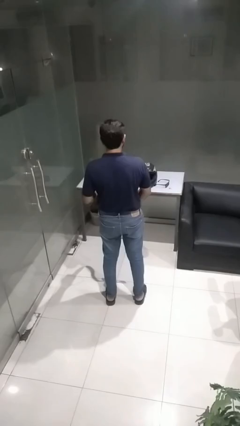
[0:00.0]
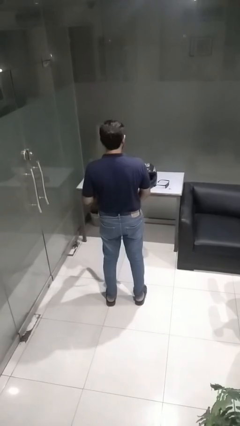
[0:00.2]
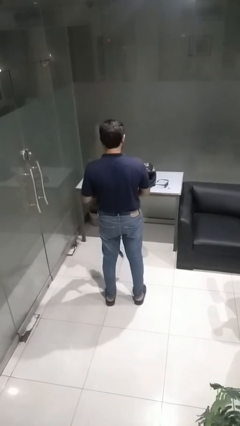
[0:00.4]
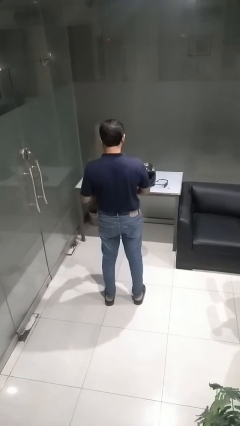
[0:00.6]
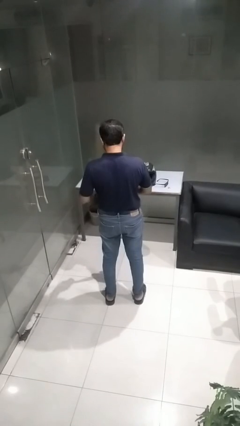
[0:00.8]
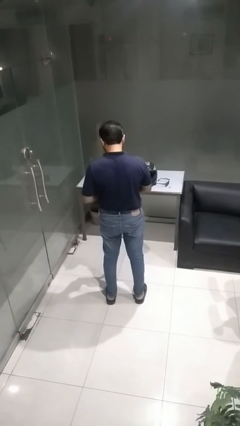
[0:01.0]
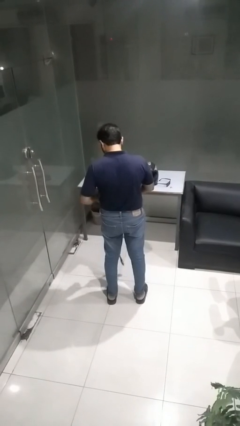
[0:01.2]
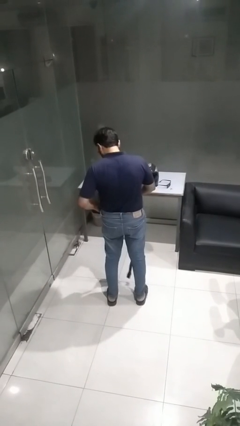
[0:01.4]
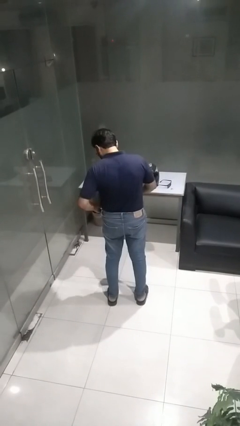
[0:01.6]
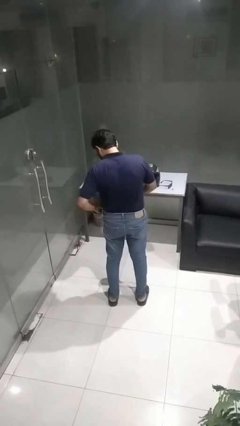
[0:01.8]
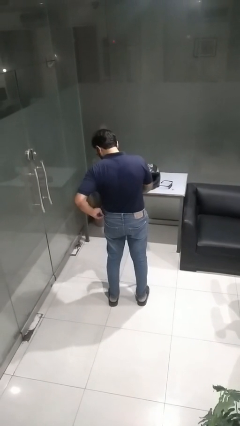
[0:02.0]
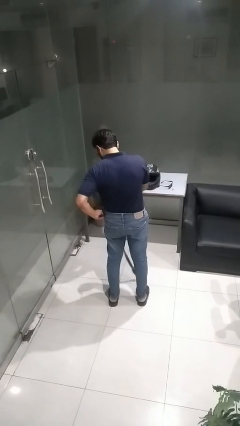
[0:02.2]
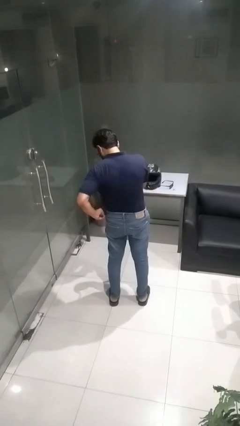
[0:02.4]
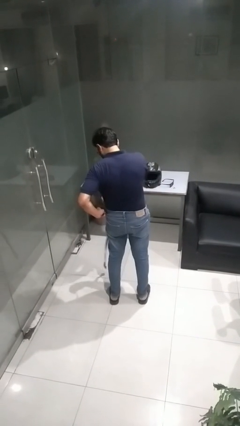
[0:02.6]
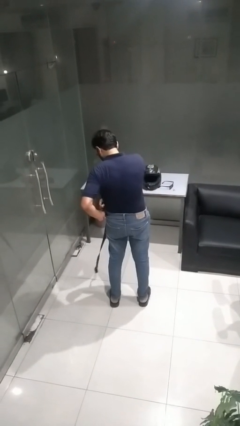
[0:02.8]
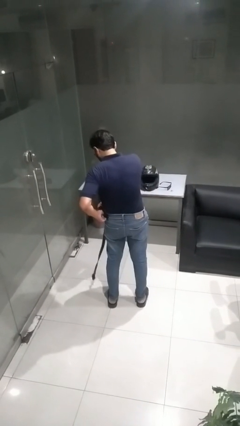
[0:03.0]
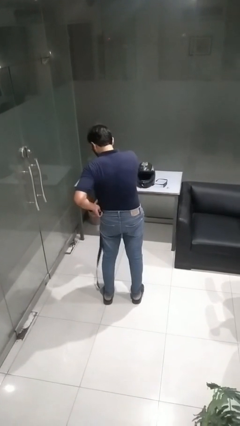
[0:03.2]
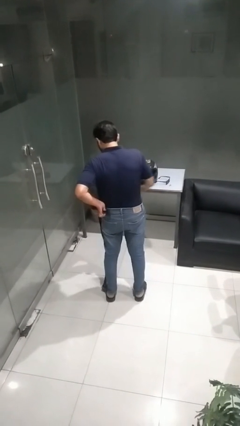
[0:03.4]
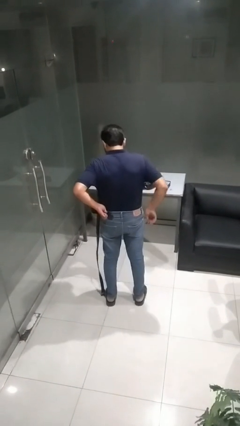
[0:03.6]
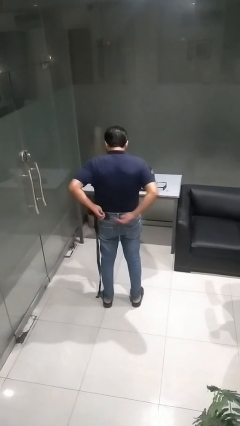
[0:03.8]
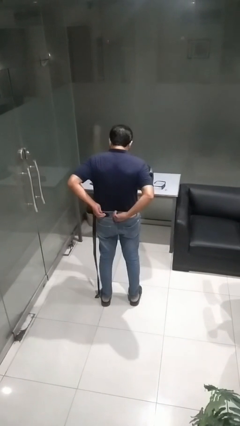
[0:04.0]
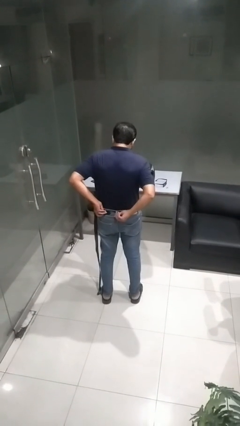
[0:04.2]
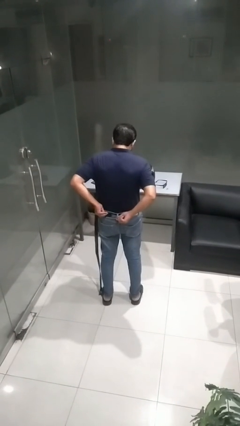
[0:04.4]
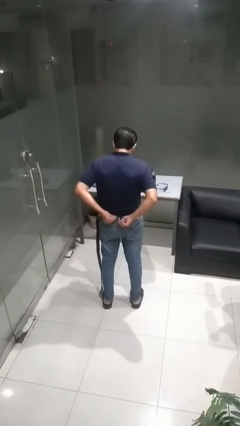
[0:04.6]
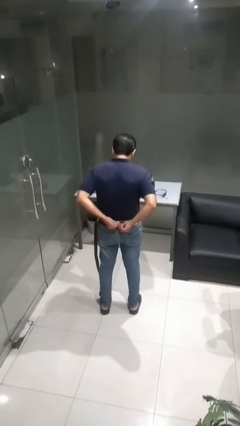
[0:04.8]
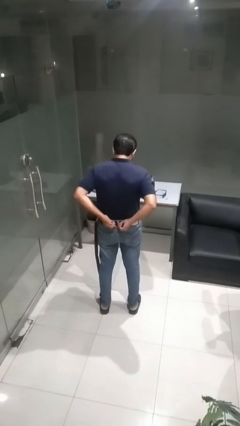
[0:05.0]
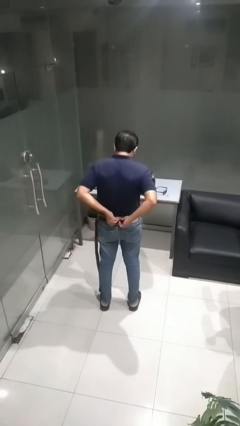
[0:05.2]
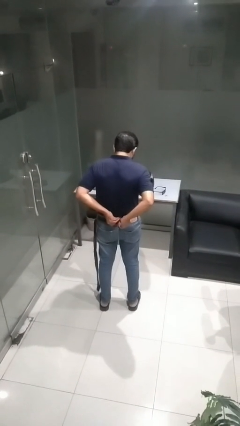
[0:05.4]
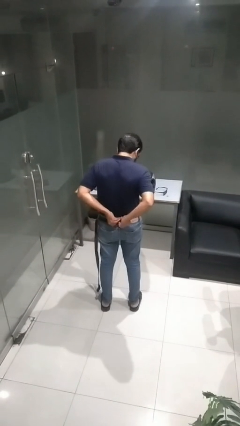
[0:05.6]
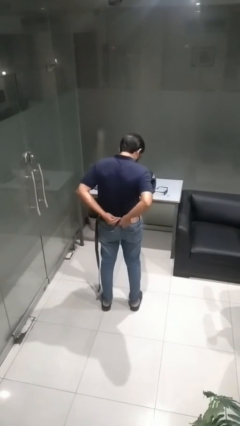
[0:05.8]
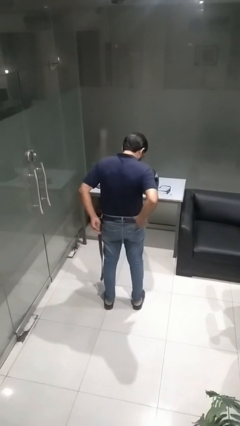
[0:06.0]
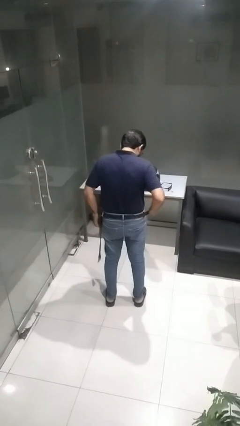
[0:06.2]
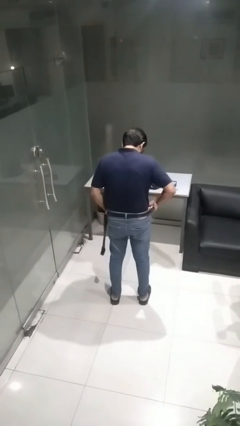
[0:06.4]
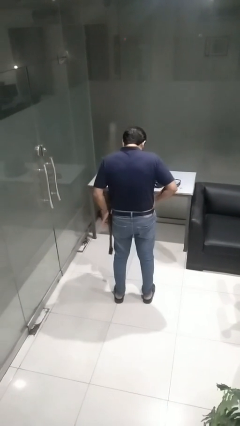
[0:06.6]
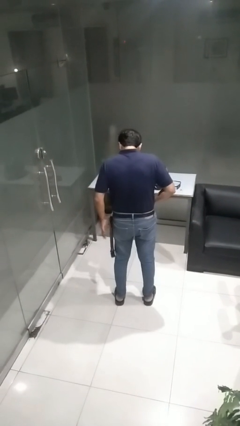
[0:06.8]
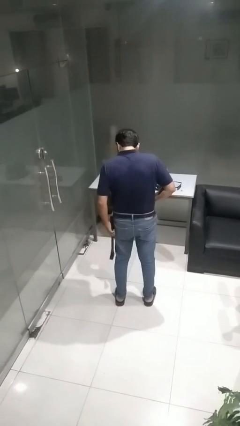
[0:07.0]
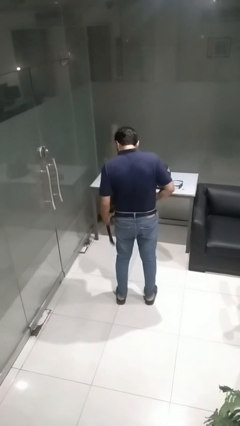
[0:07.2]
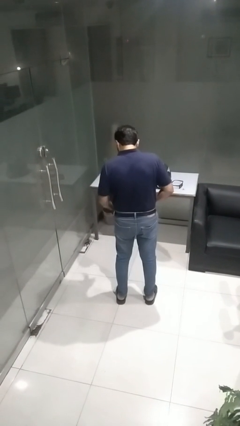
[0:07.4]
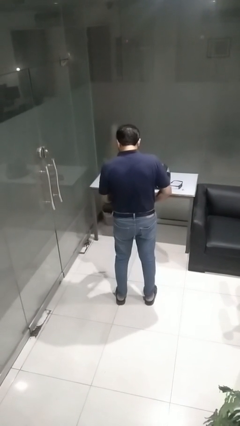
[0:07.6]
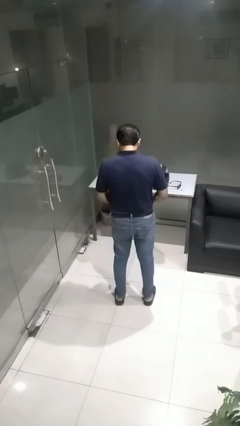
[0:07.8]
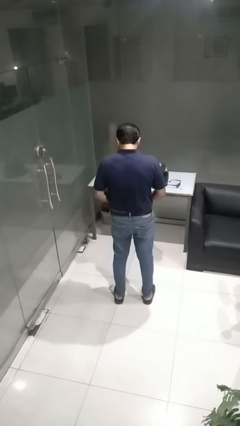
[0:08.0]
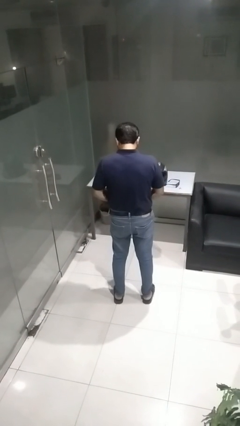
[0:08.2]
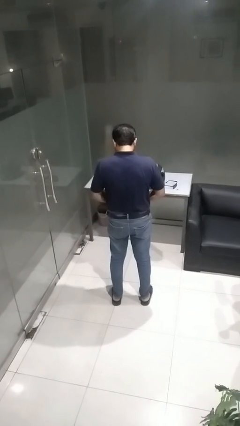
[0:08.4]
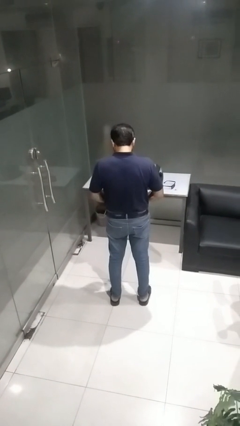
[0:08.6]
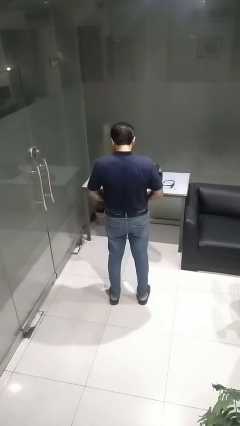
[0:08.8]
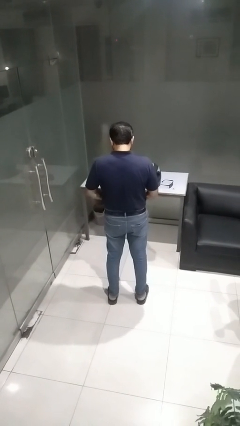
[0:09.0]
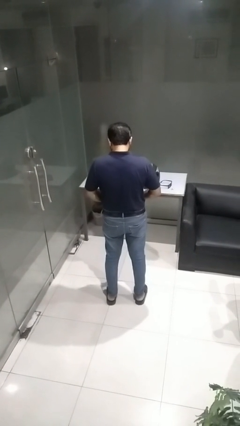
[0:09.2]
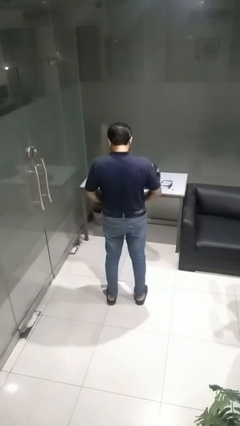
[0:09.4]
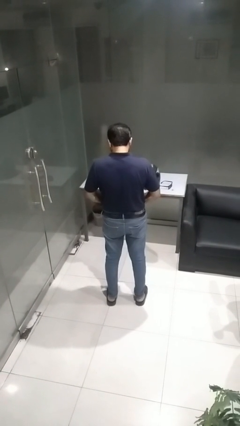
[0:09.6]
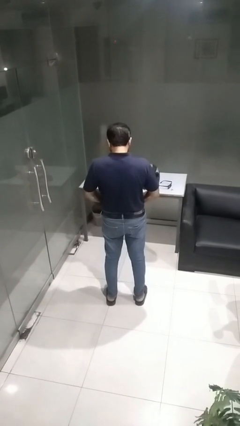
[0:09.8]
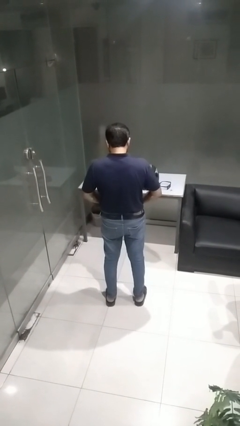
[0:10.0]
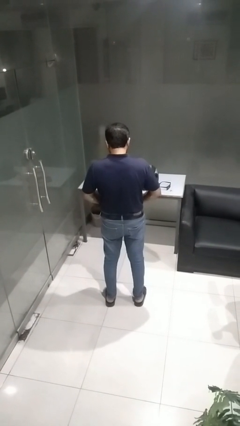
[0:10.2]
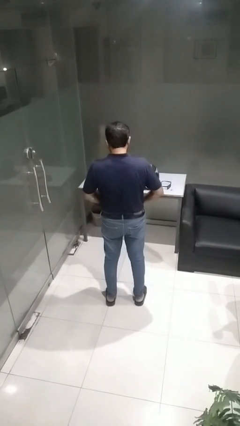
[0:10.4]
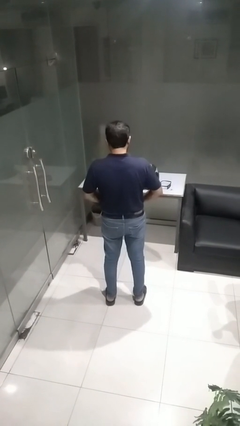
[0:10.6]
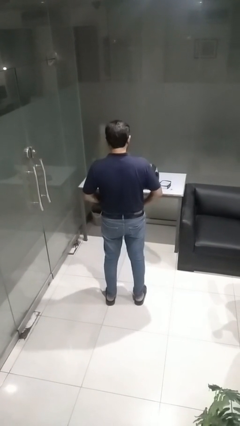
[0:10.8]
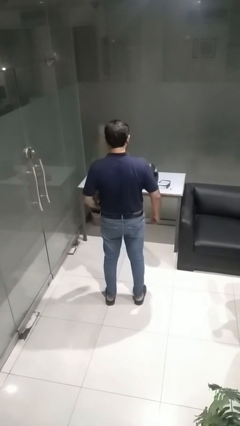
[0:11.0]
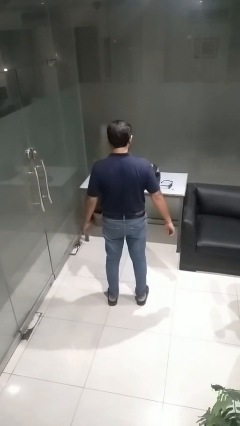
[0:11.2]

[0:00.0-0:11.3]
person puts on belt

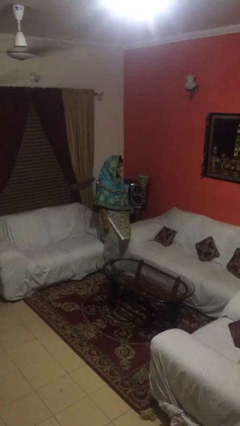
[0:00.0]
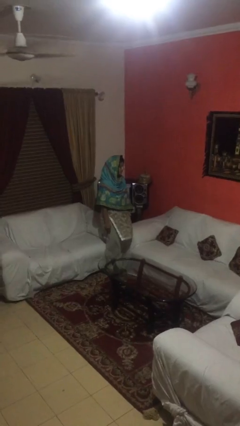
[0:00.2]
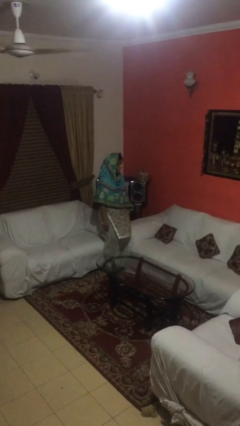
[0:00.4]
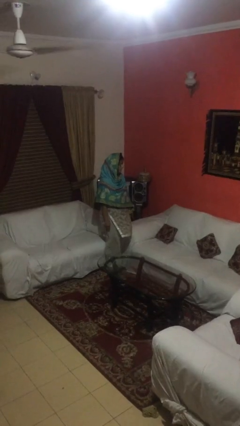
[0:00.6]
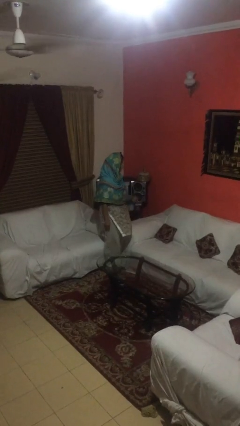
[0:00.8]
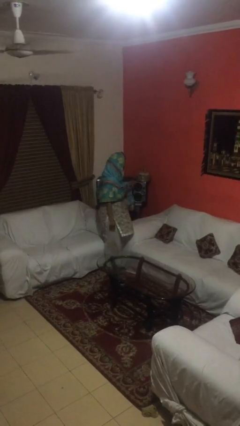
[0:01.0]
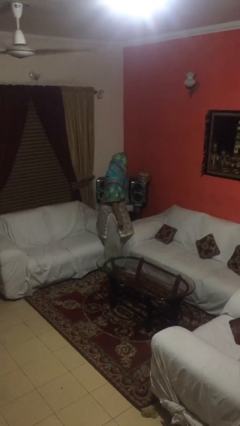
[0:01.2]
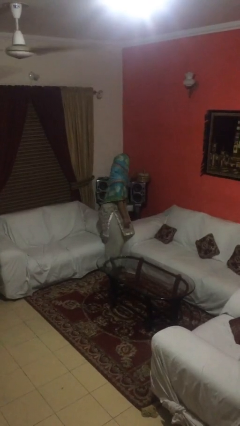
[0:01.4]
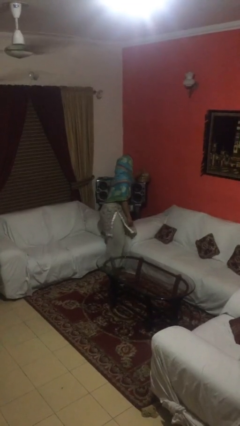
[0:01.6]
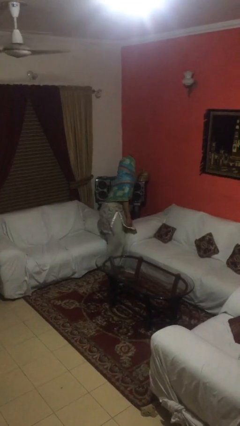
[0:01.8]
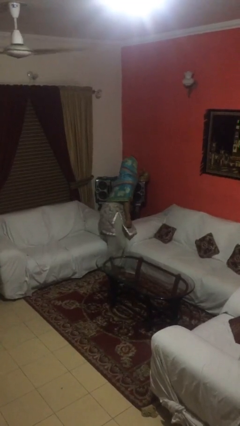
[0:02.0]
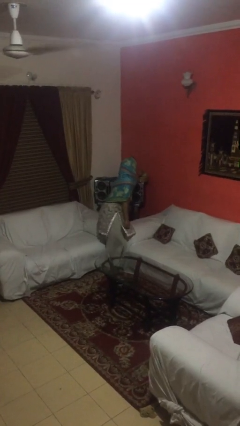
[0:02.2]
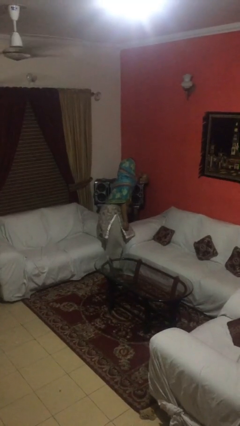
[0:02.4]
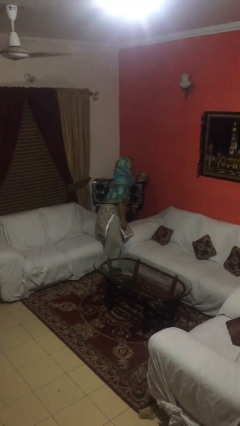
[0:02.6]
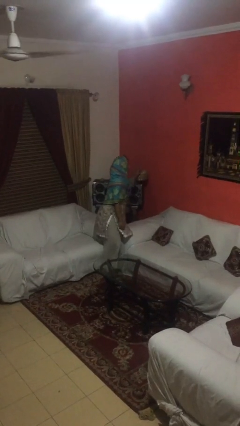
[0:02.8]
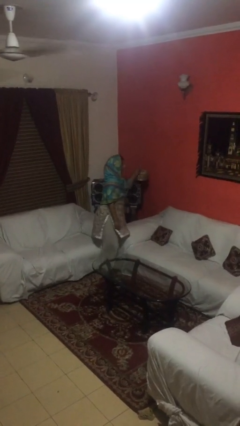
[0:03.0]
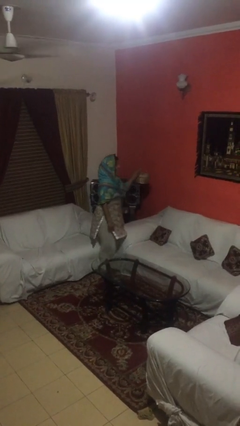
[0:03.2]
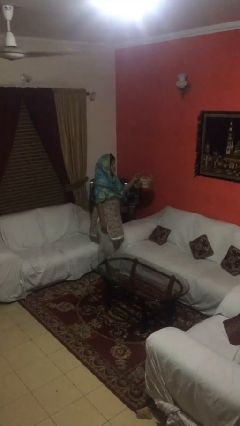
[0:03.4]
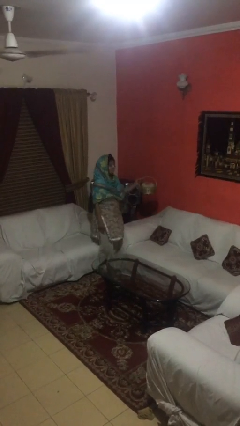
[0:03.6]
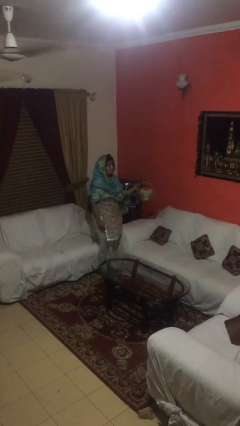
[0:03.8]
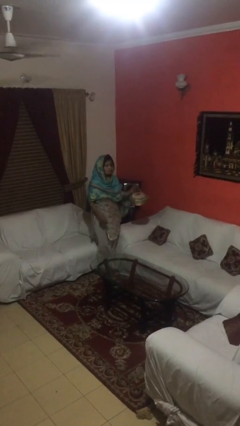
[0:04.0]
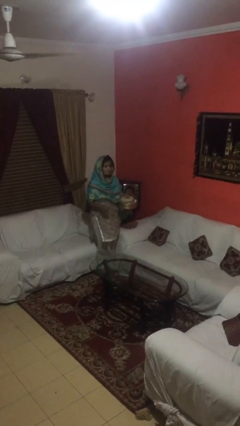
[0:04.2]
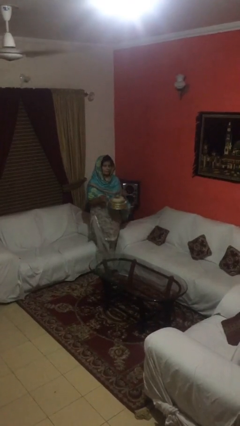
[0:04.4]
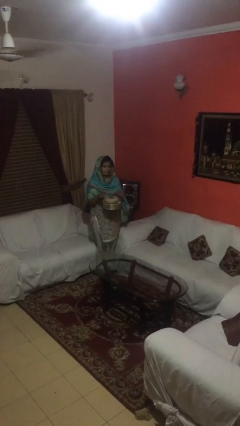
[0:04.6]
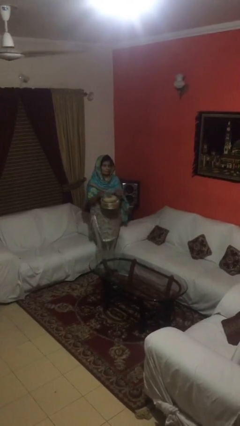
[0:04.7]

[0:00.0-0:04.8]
person picks up object from shelf

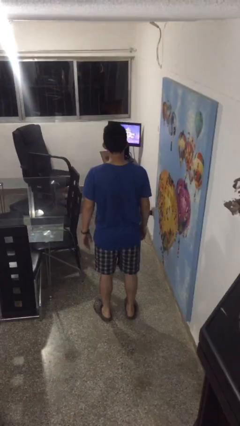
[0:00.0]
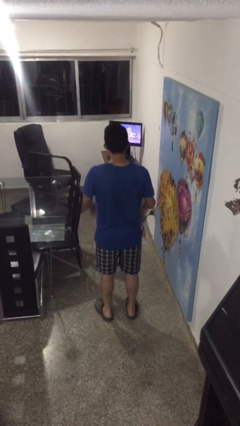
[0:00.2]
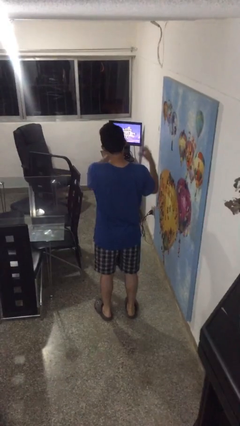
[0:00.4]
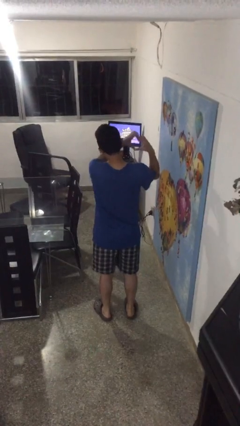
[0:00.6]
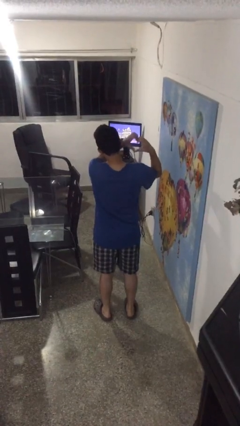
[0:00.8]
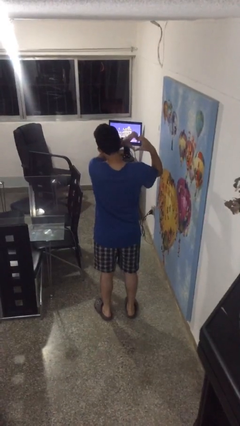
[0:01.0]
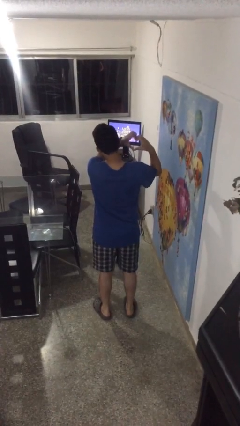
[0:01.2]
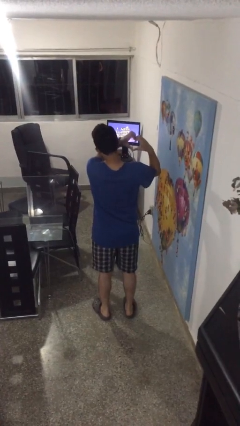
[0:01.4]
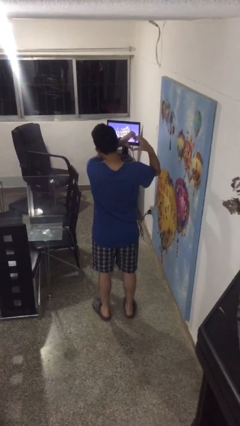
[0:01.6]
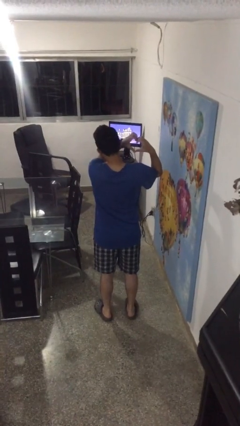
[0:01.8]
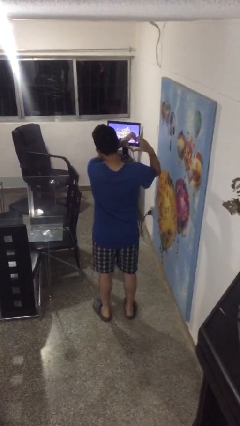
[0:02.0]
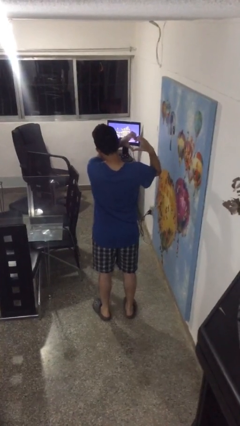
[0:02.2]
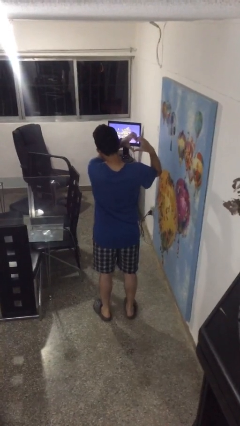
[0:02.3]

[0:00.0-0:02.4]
person gestures heart
